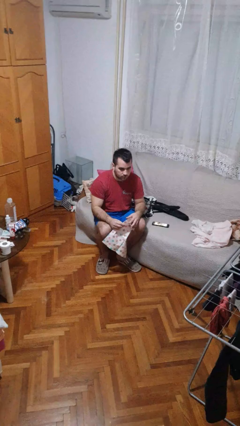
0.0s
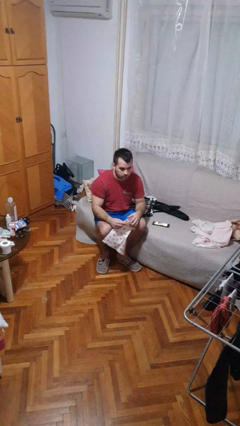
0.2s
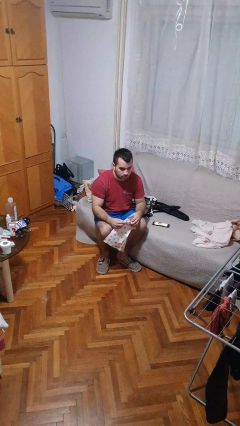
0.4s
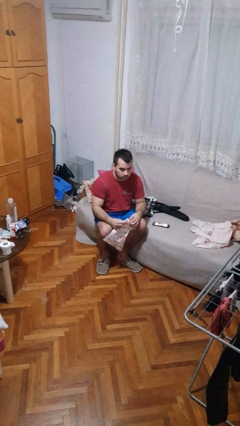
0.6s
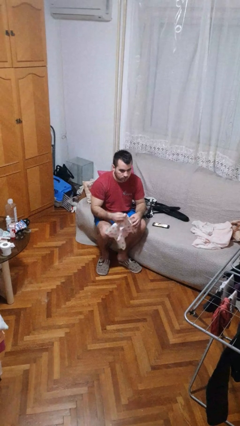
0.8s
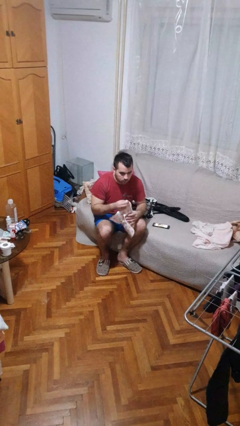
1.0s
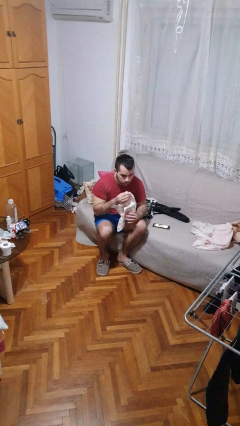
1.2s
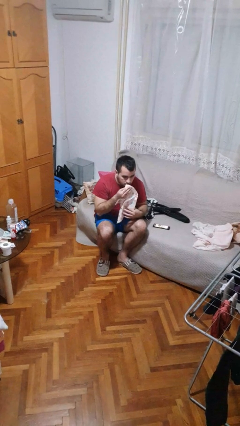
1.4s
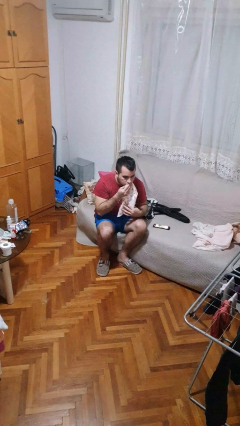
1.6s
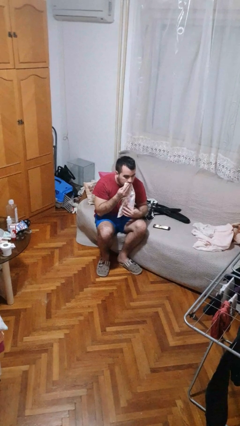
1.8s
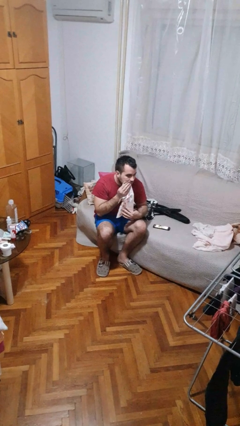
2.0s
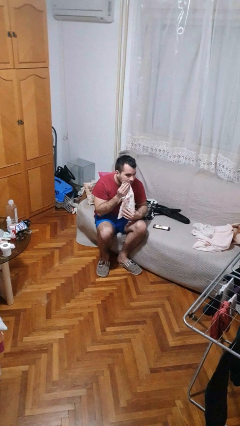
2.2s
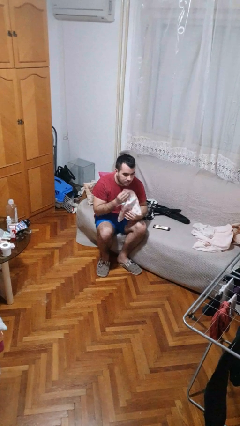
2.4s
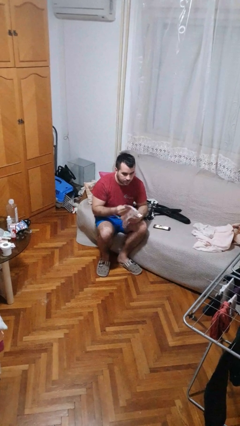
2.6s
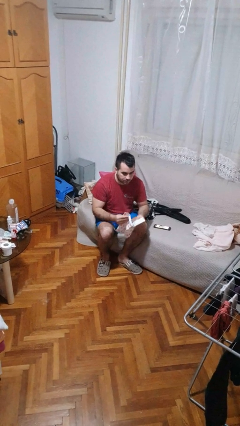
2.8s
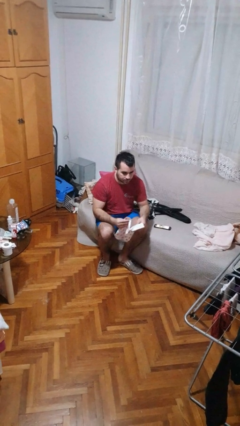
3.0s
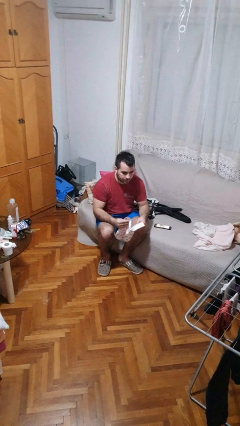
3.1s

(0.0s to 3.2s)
person wipes mouth with napkin

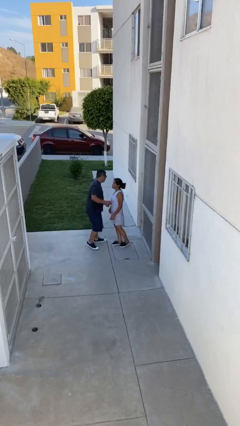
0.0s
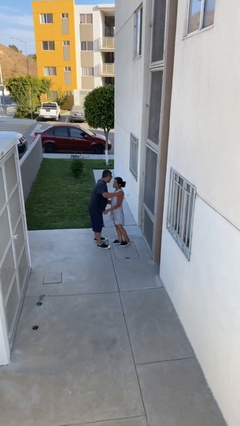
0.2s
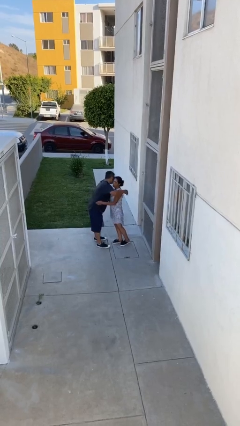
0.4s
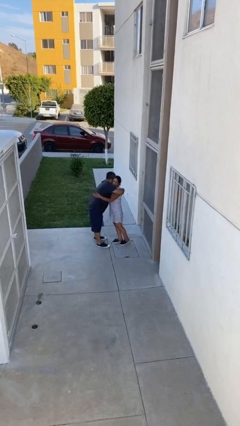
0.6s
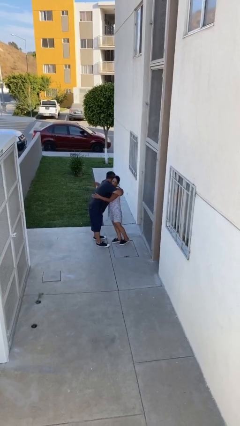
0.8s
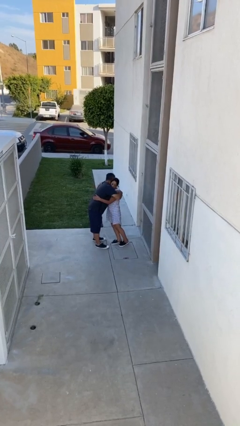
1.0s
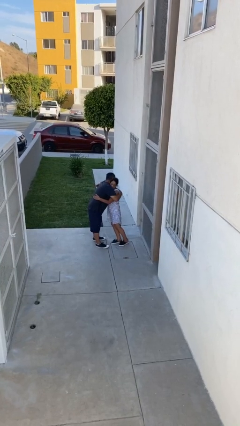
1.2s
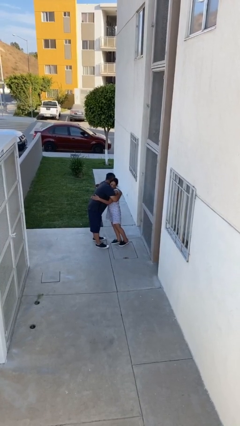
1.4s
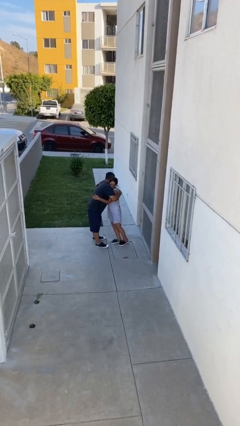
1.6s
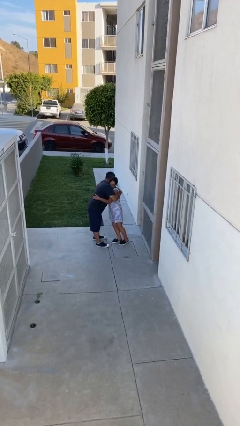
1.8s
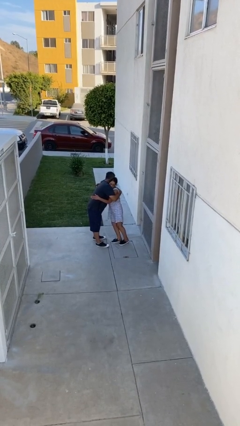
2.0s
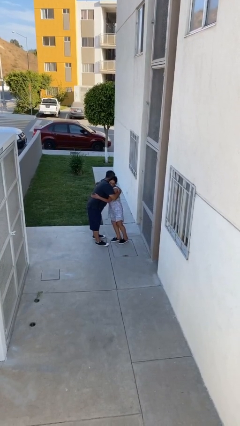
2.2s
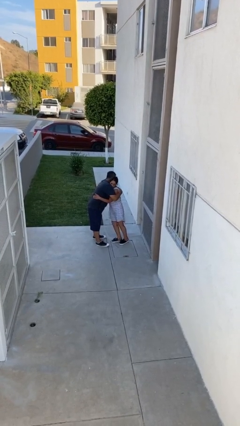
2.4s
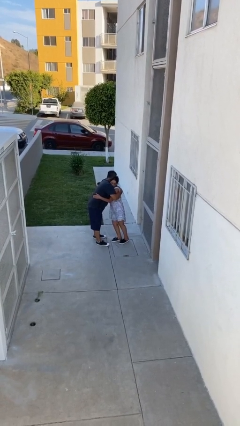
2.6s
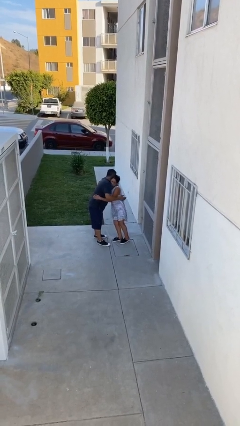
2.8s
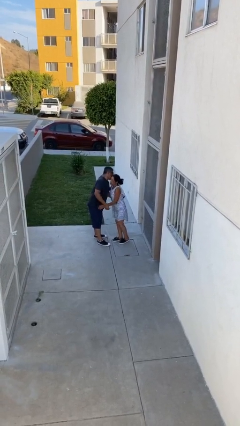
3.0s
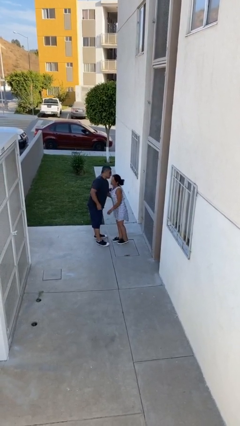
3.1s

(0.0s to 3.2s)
person embraces person

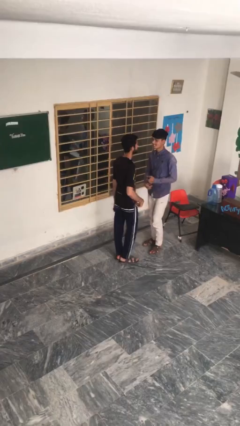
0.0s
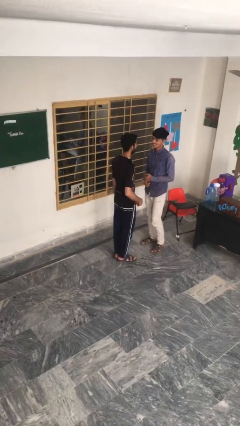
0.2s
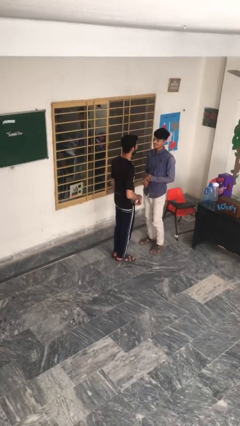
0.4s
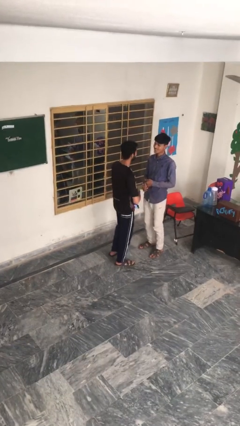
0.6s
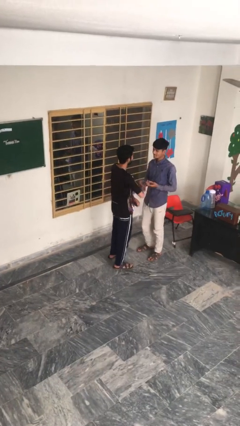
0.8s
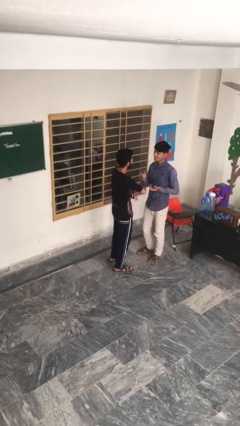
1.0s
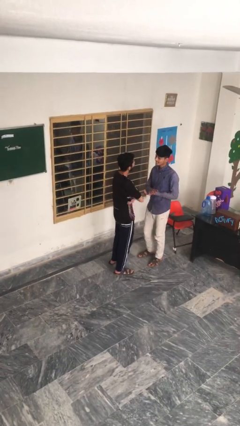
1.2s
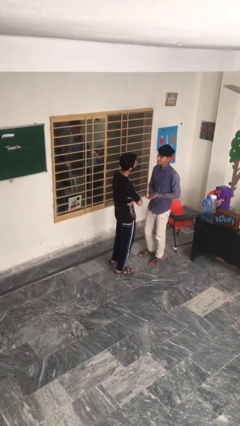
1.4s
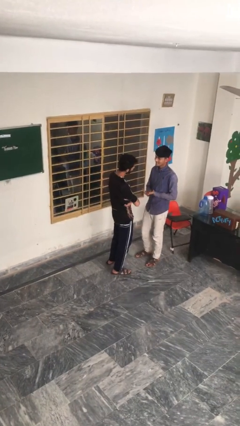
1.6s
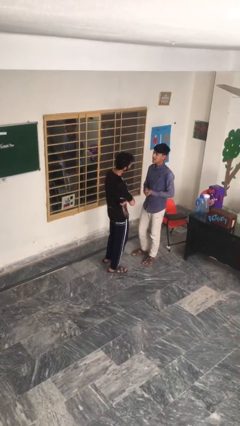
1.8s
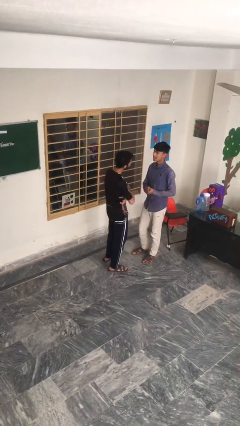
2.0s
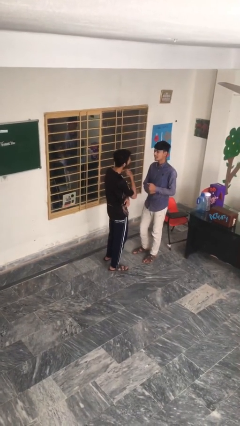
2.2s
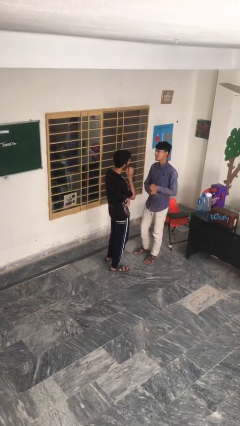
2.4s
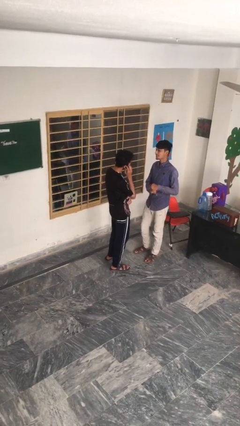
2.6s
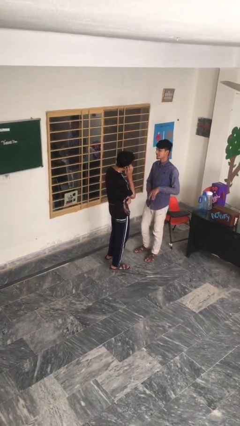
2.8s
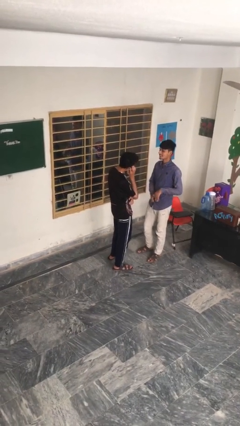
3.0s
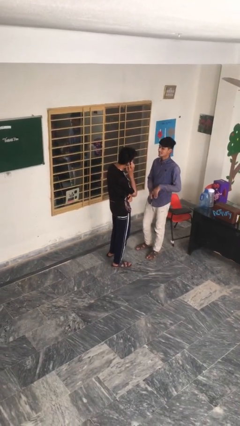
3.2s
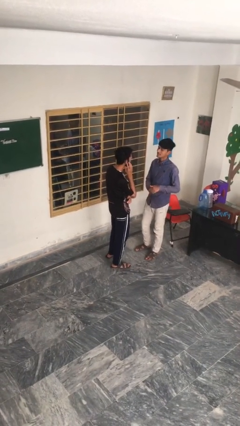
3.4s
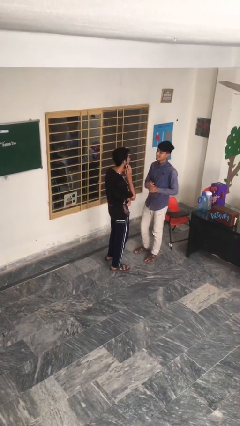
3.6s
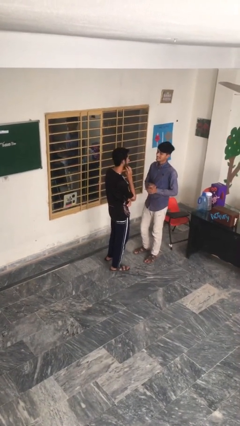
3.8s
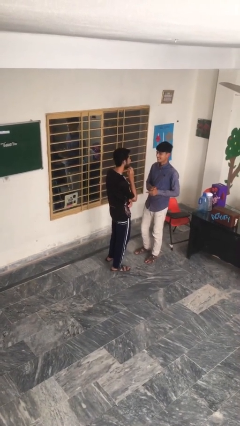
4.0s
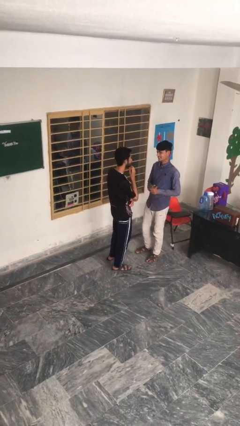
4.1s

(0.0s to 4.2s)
person talks to person

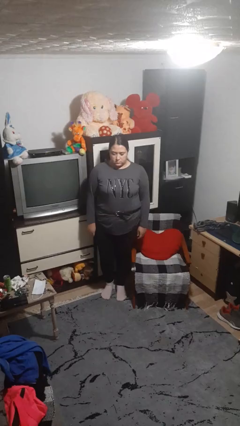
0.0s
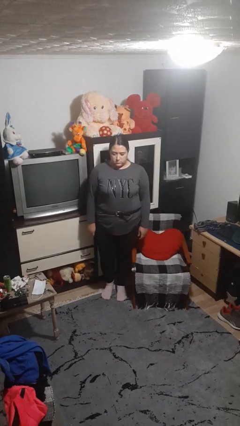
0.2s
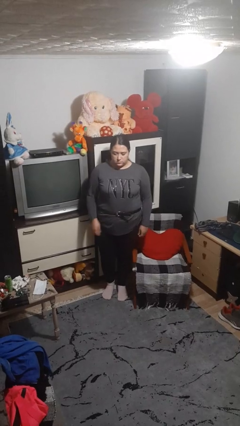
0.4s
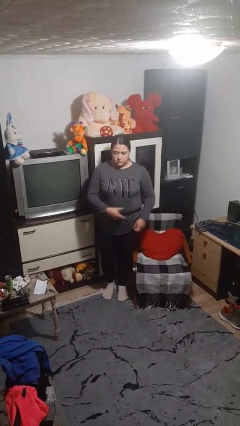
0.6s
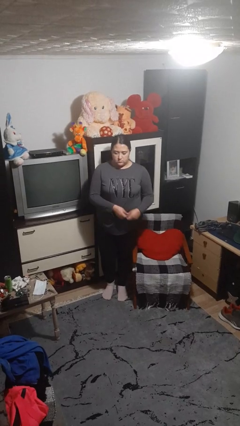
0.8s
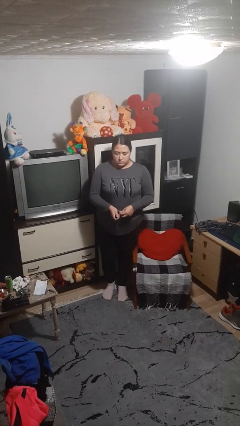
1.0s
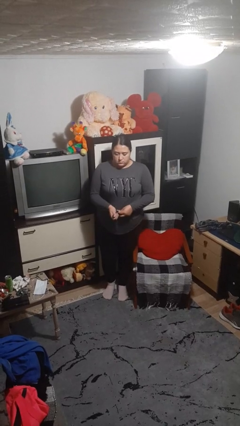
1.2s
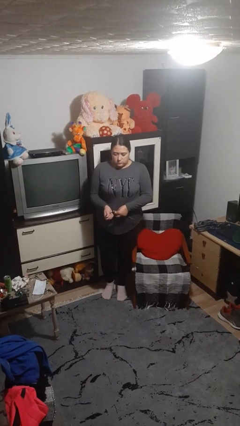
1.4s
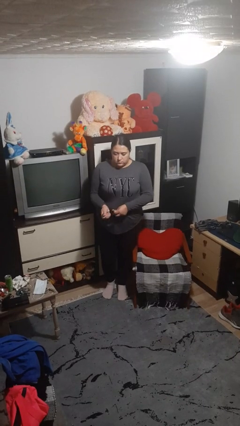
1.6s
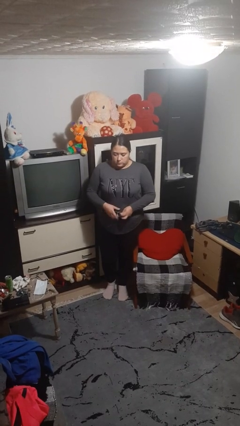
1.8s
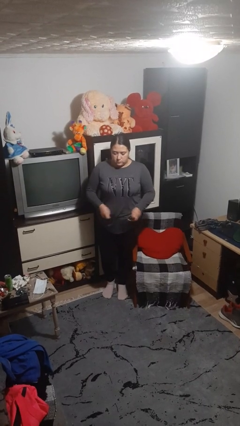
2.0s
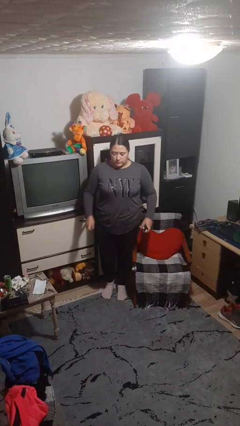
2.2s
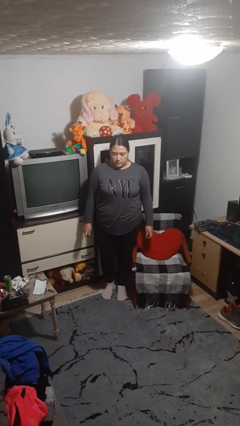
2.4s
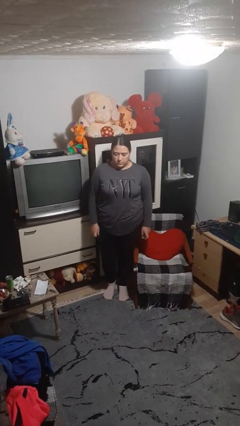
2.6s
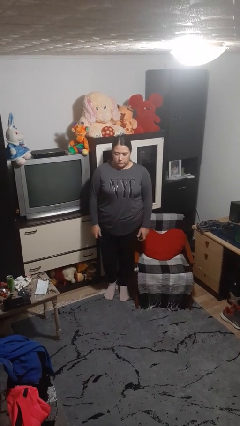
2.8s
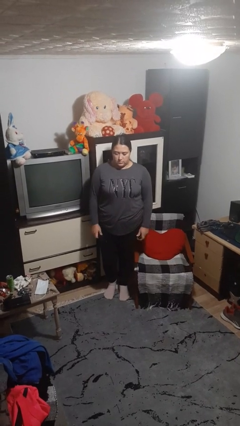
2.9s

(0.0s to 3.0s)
person takes off belt

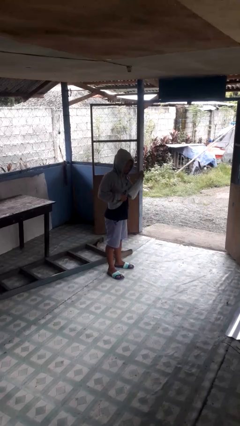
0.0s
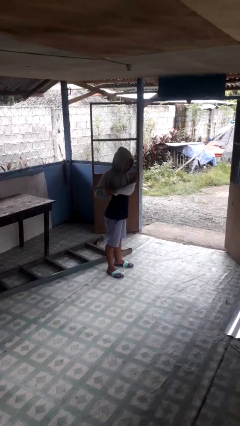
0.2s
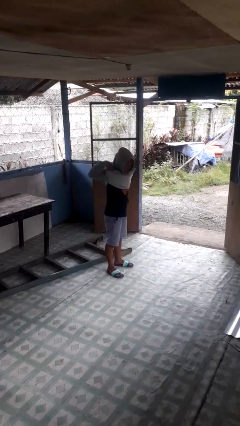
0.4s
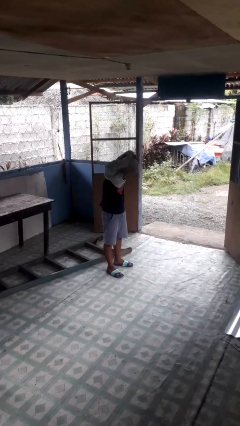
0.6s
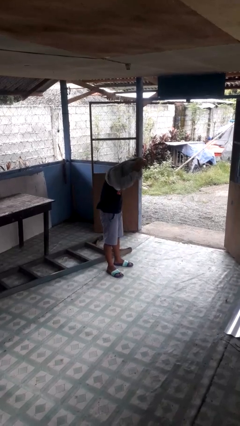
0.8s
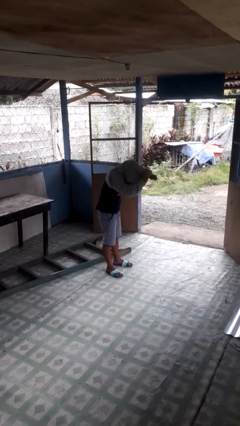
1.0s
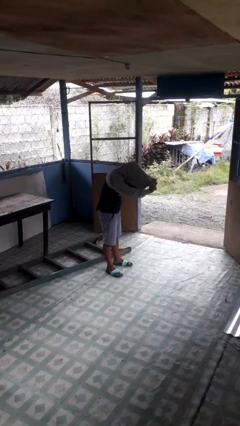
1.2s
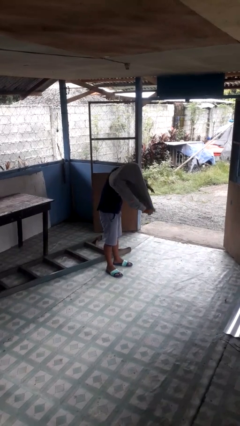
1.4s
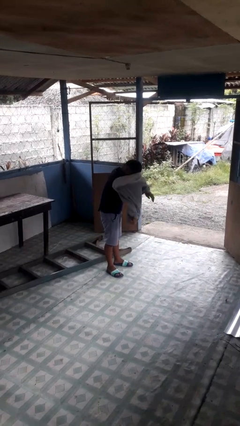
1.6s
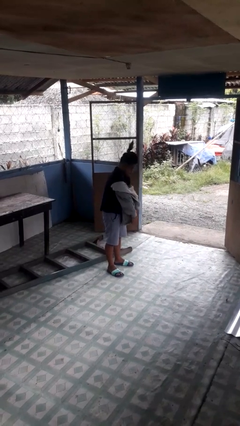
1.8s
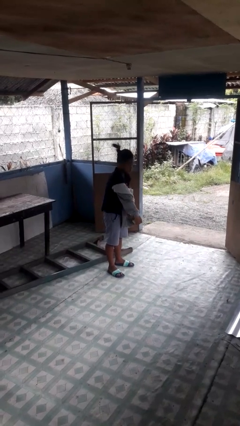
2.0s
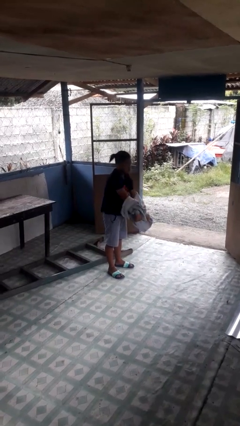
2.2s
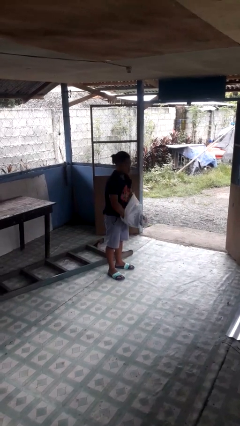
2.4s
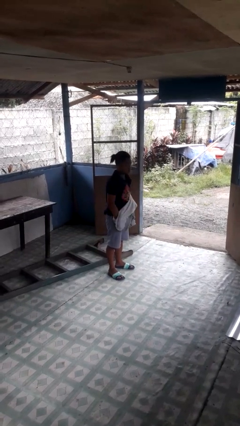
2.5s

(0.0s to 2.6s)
person takes off hoodie

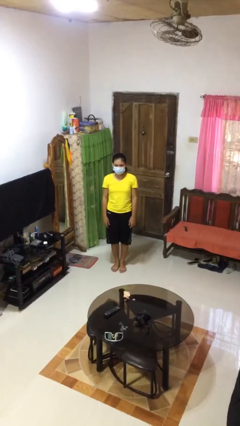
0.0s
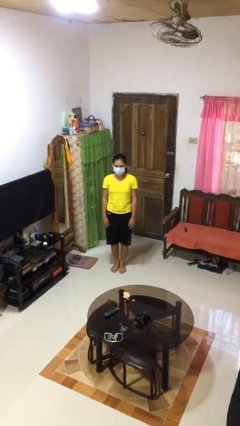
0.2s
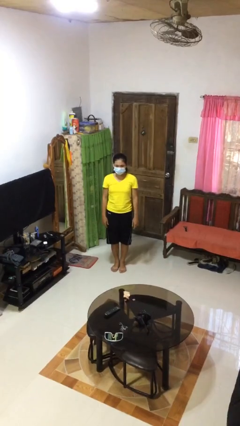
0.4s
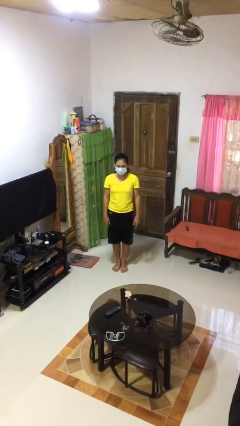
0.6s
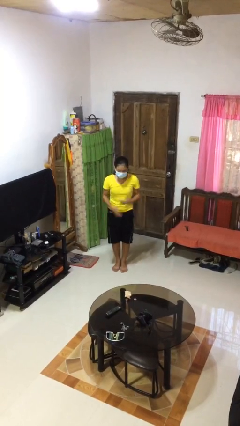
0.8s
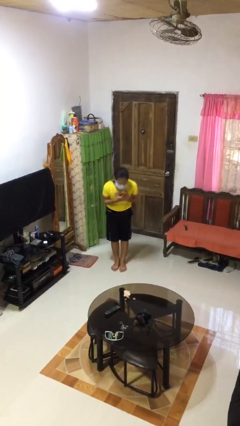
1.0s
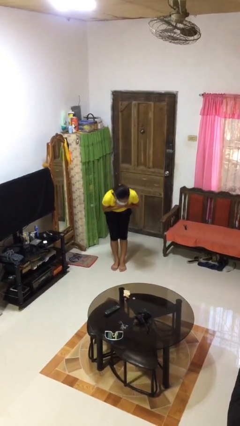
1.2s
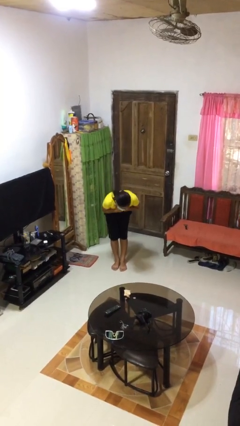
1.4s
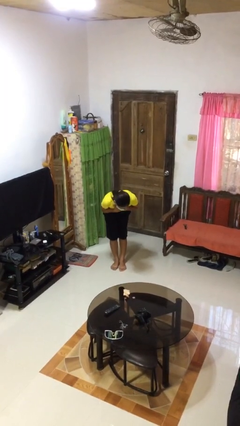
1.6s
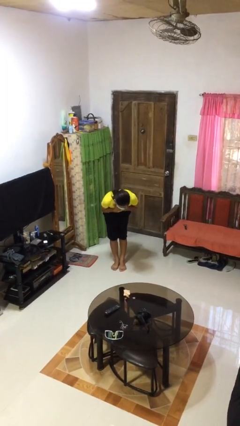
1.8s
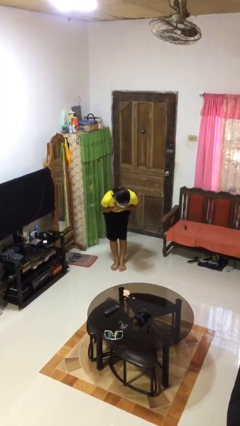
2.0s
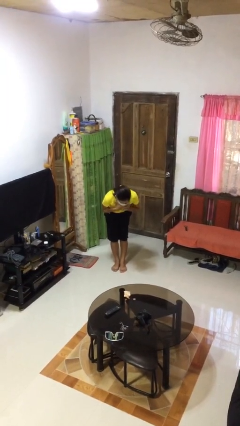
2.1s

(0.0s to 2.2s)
person bows
